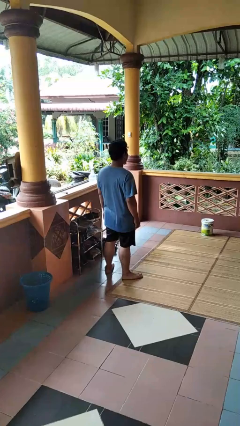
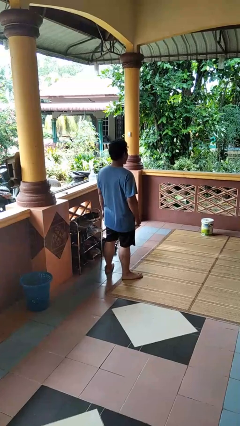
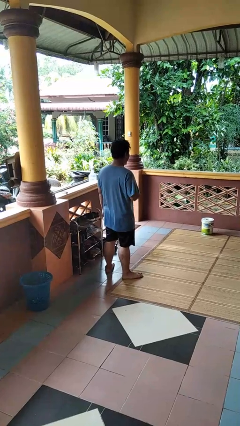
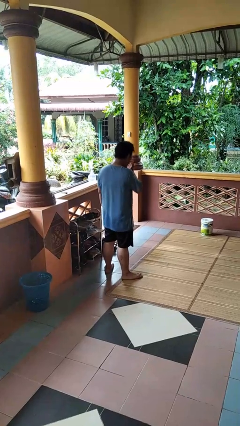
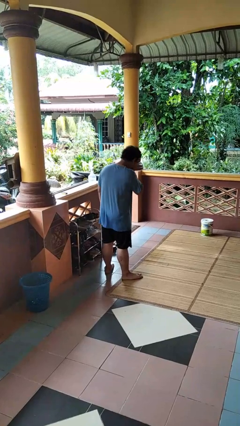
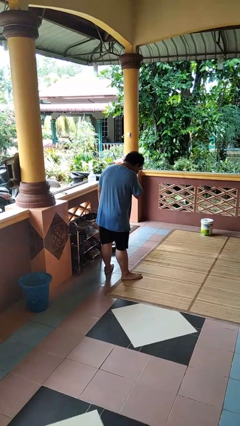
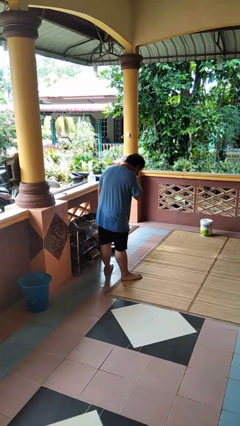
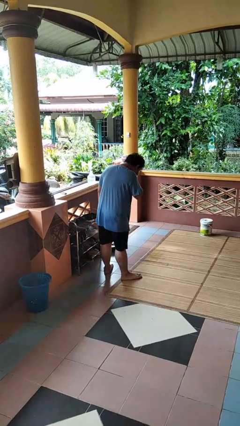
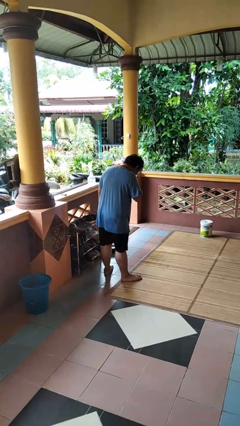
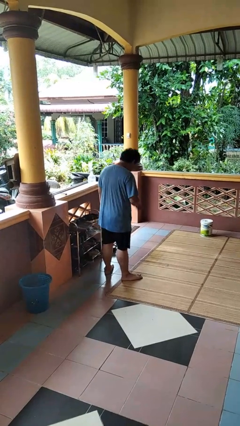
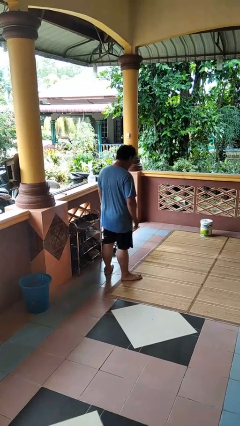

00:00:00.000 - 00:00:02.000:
person sneezes into hand

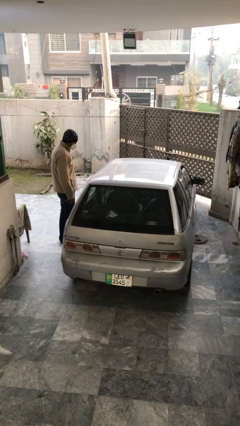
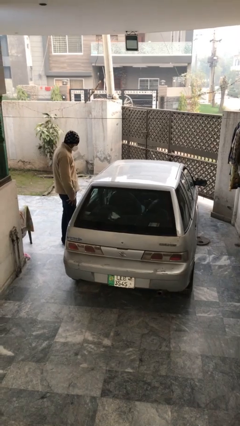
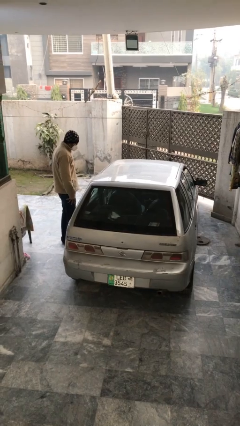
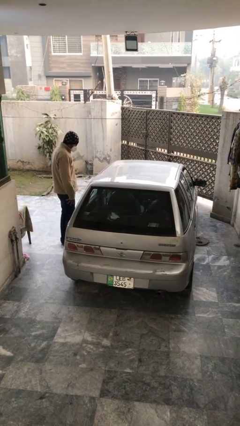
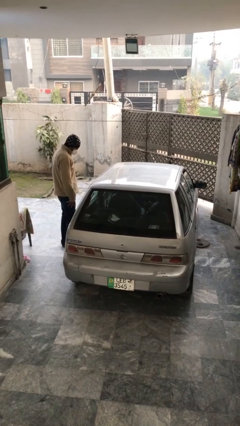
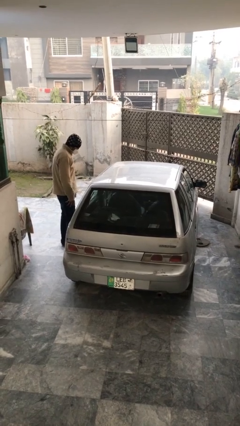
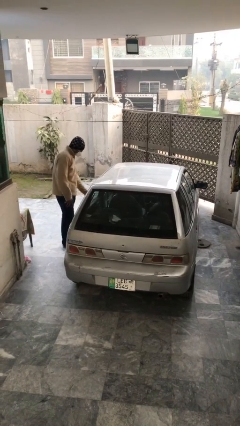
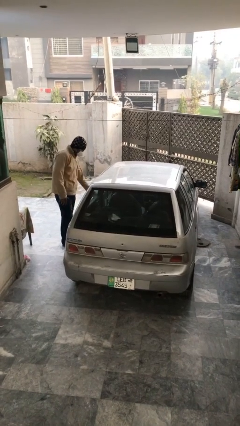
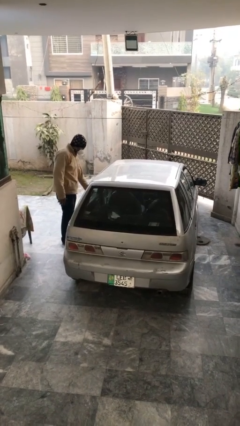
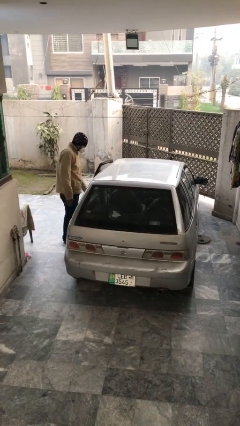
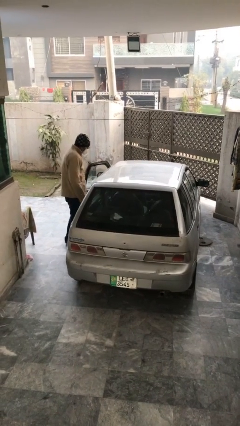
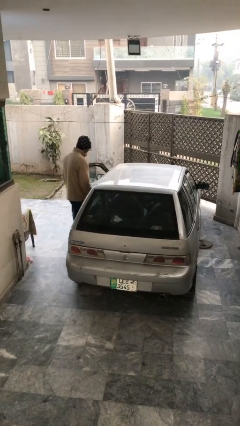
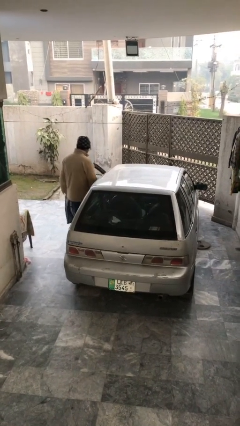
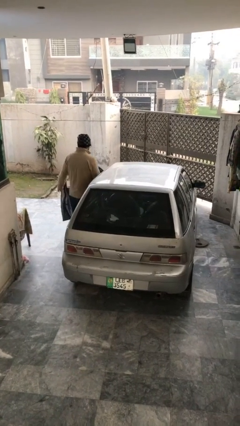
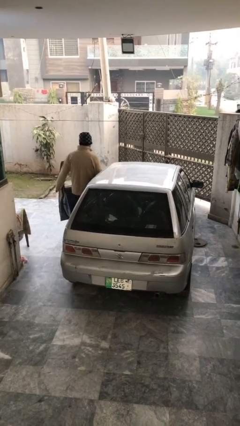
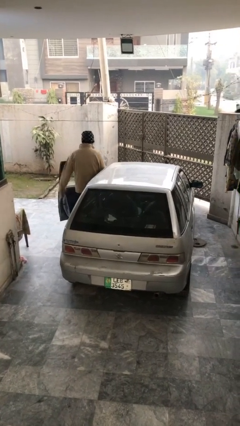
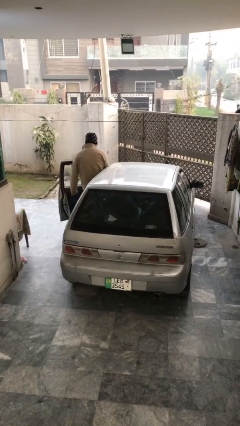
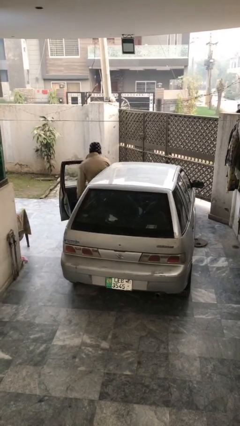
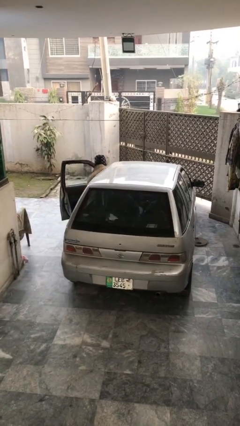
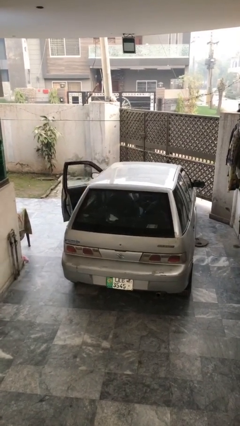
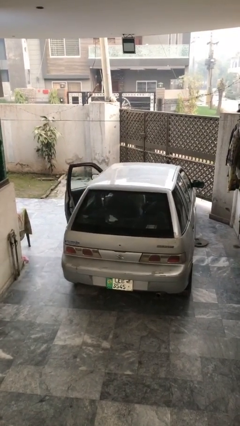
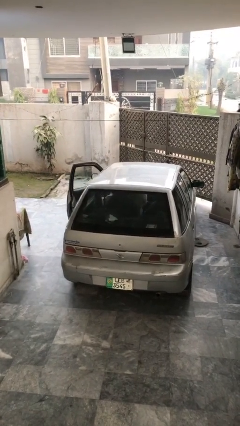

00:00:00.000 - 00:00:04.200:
car picks up person

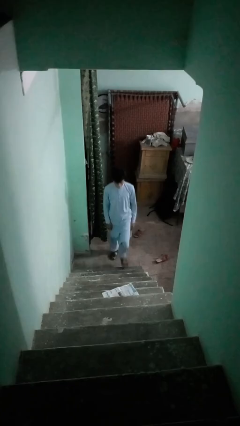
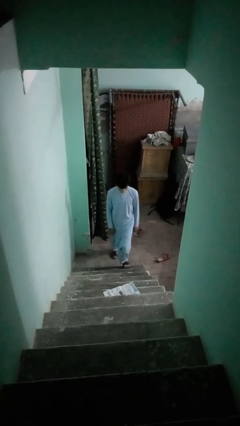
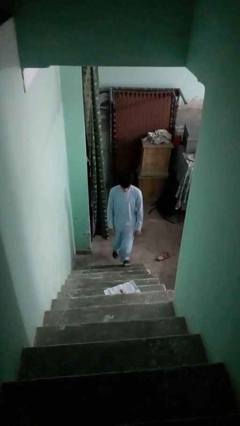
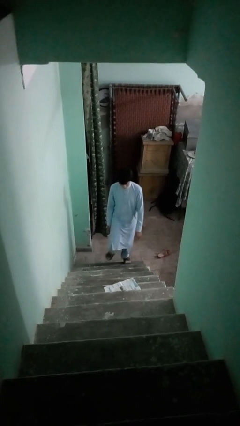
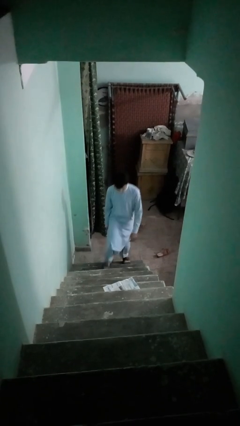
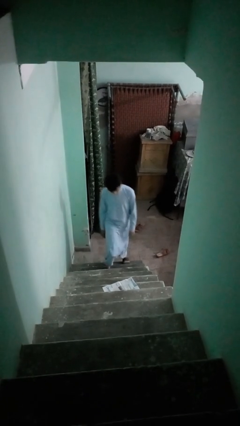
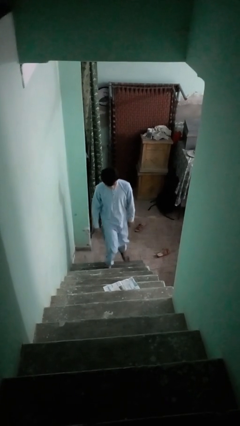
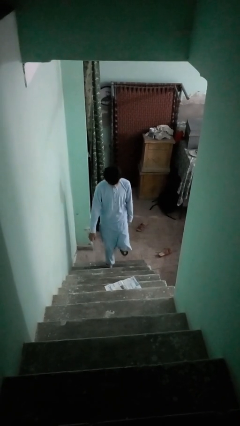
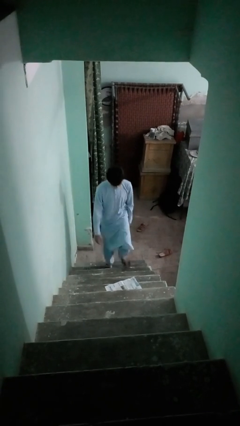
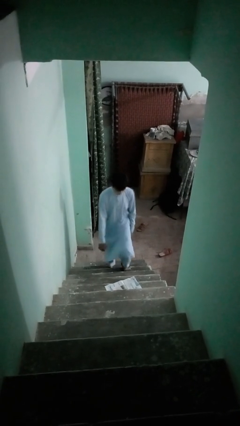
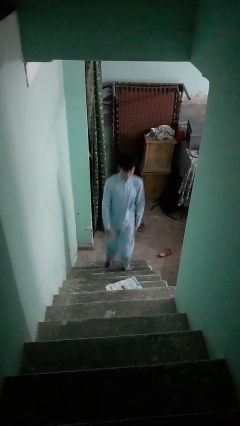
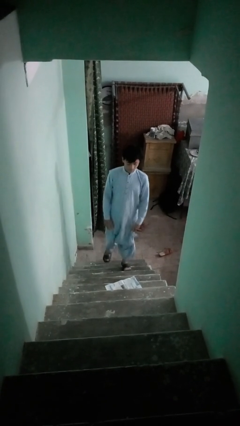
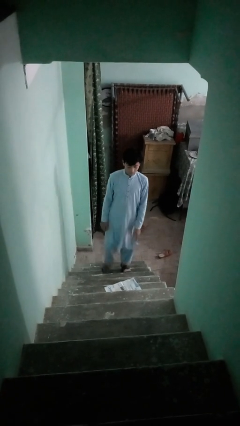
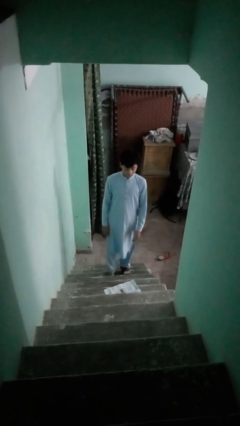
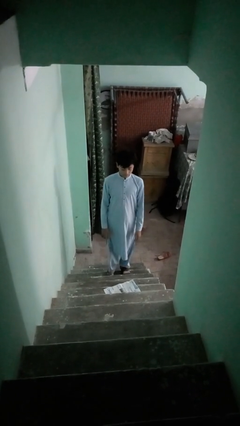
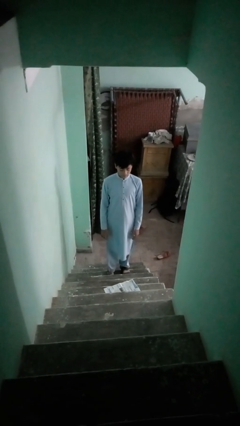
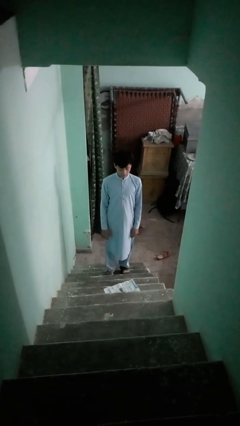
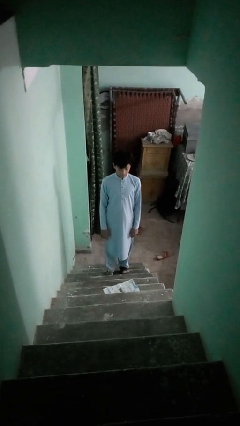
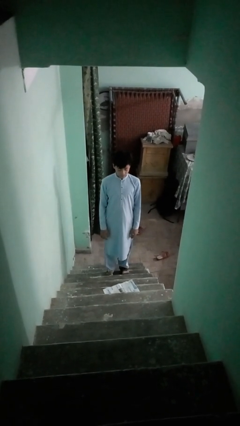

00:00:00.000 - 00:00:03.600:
person climbs up stairs

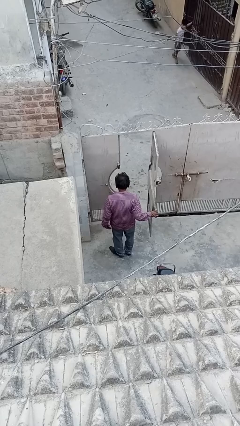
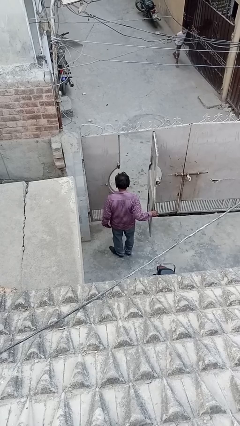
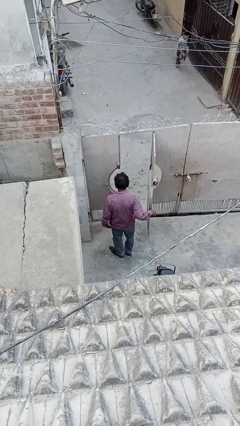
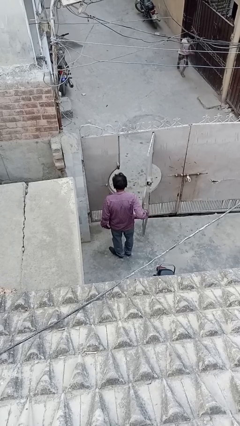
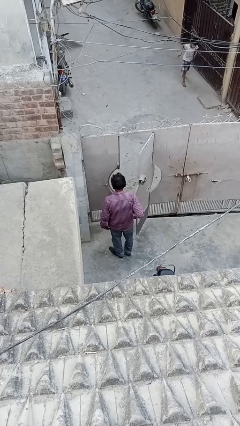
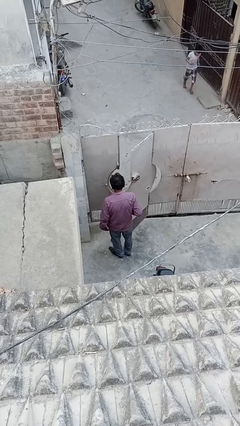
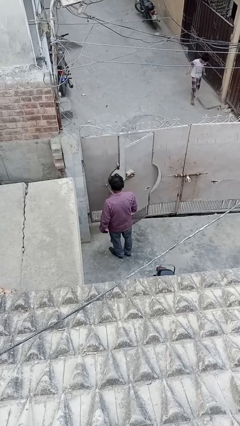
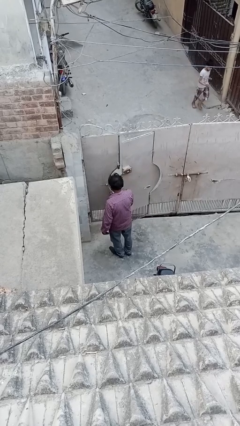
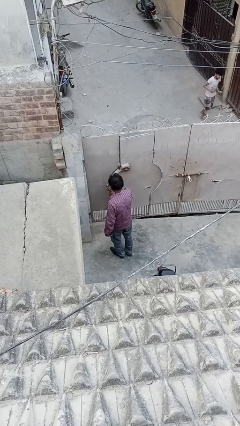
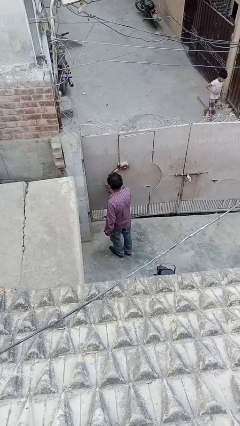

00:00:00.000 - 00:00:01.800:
person closes facility door

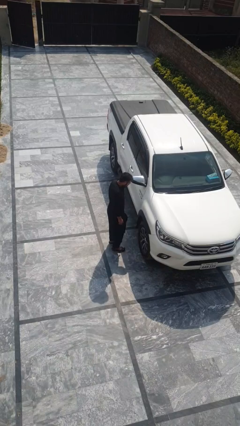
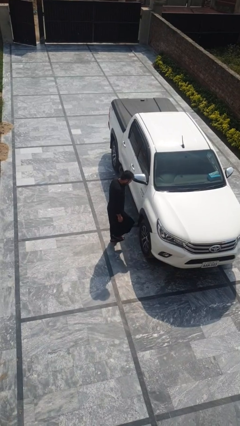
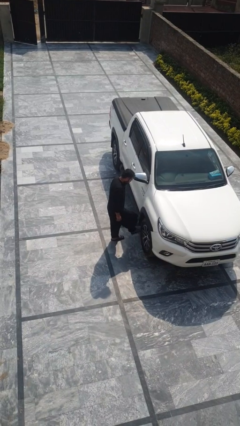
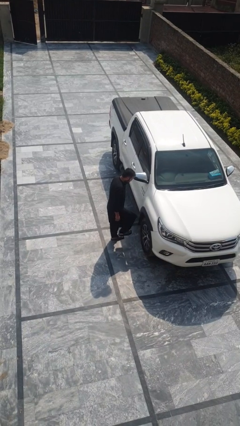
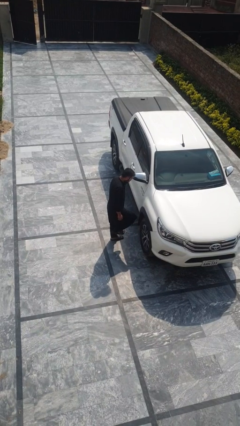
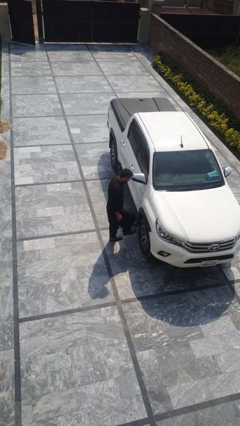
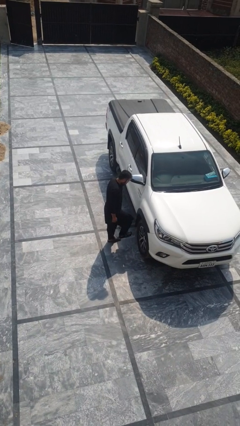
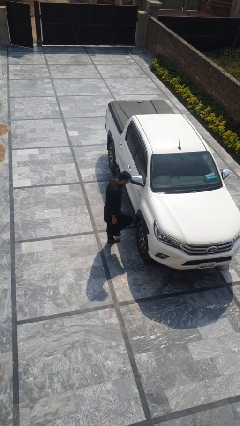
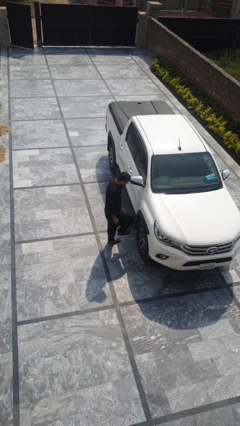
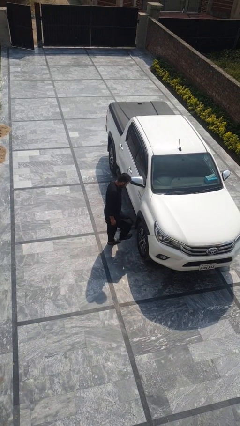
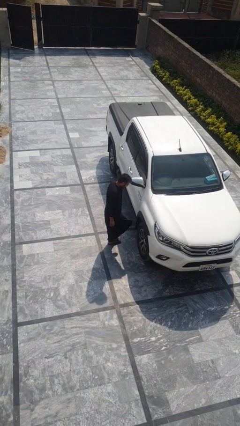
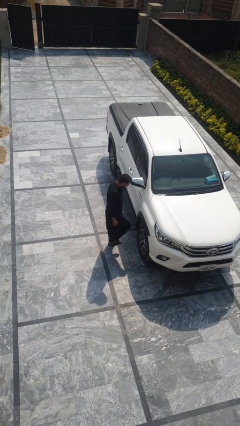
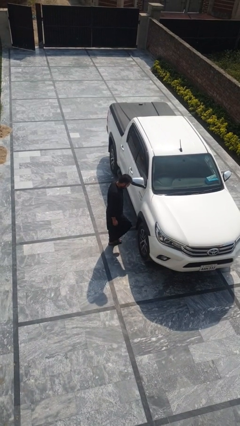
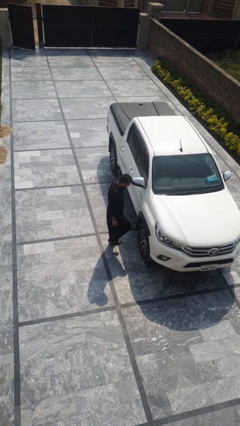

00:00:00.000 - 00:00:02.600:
person kicks car tires

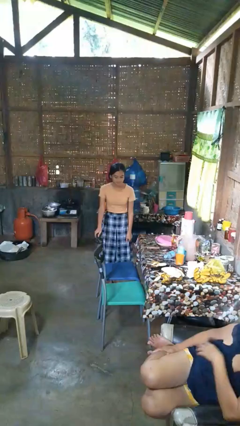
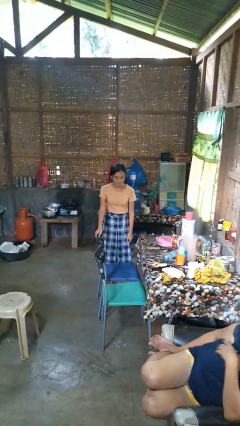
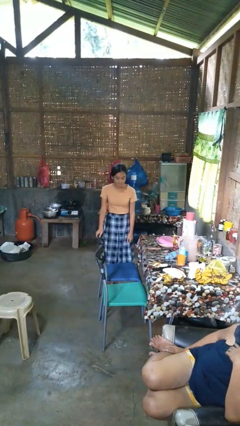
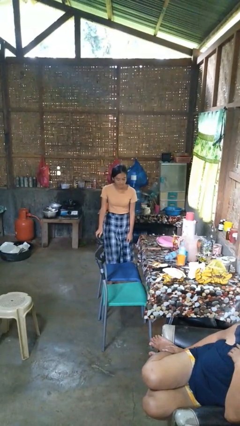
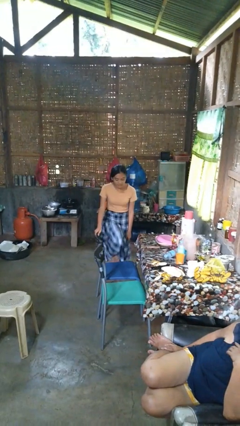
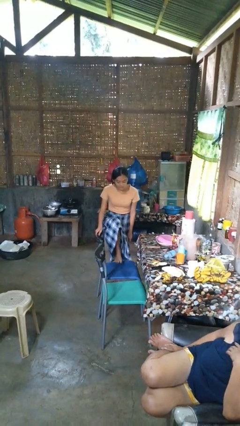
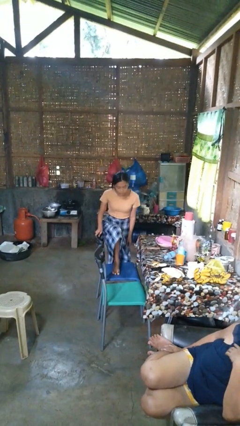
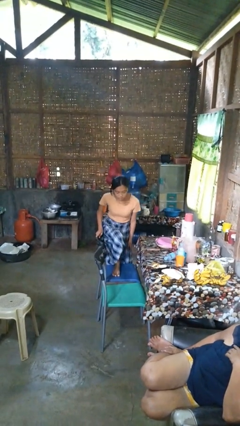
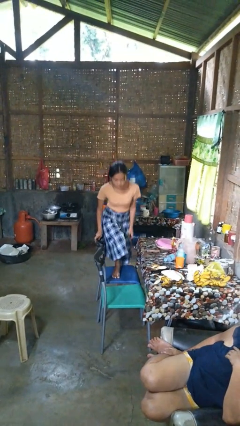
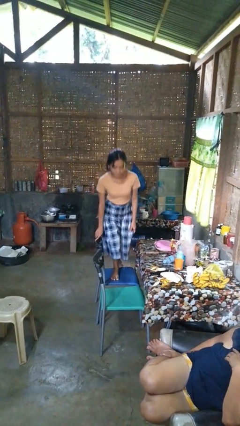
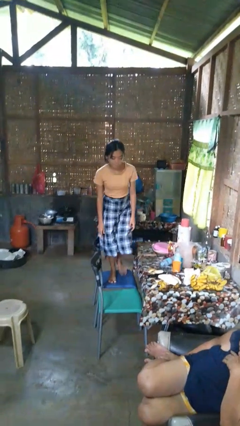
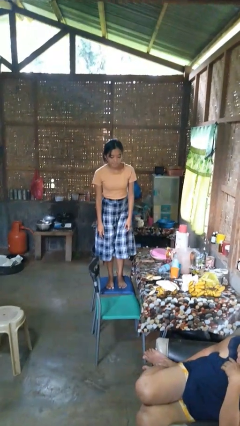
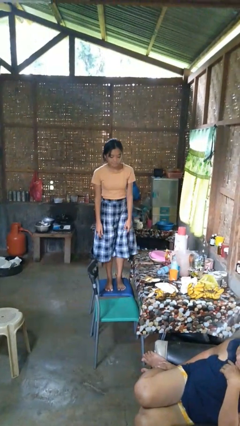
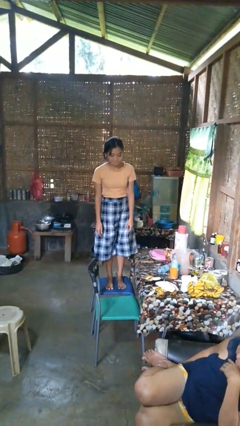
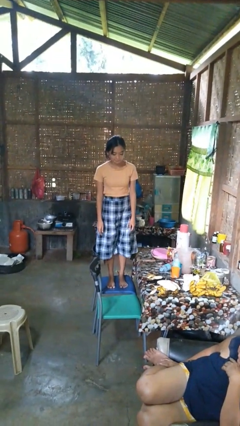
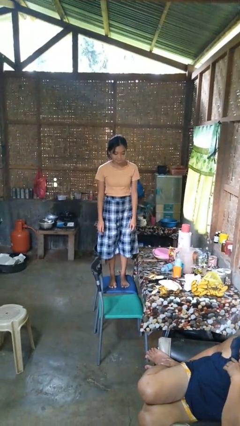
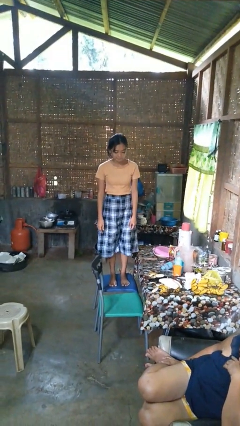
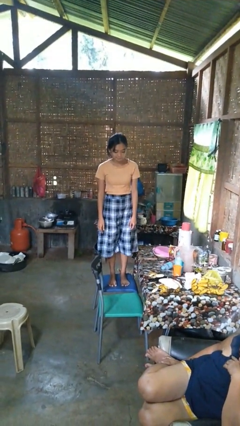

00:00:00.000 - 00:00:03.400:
person climbs on couch
